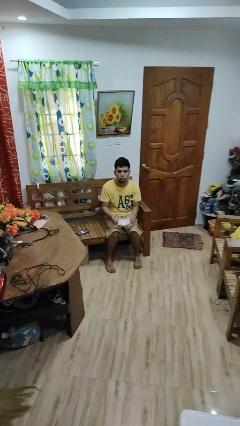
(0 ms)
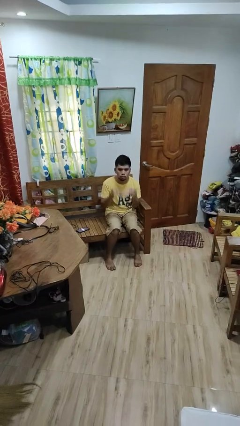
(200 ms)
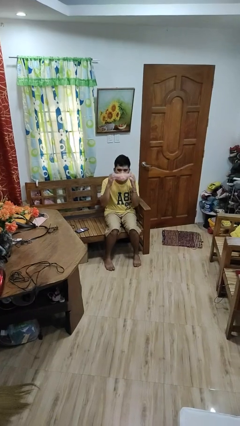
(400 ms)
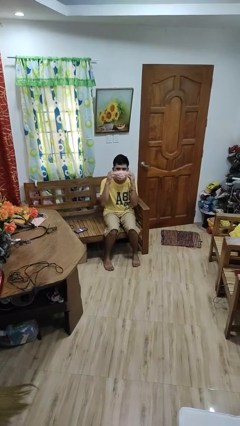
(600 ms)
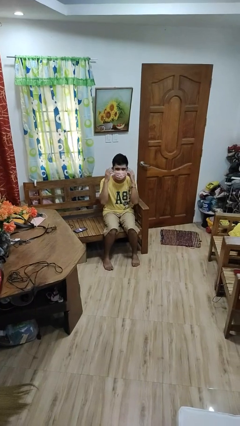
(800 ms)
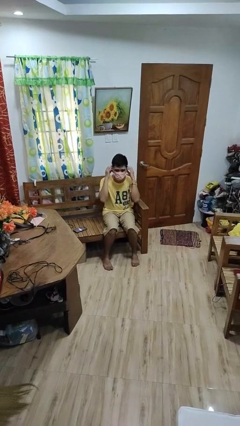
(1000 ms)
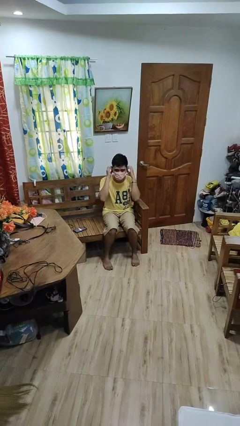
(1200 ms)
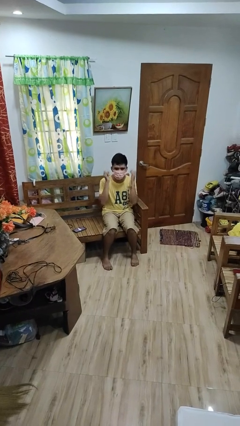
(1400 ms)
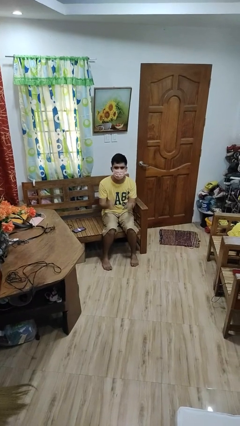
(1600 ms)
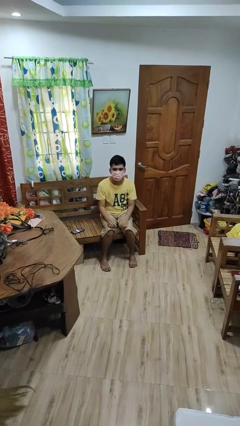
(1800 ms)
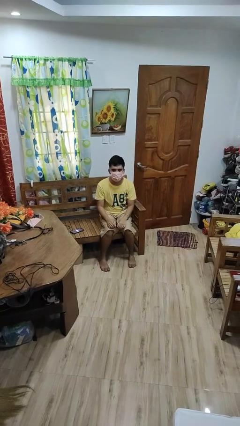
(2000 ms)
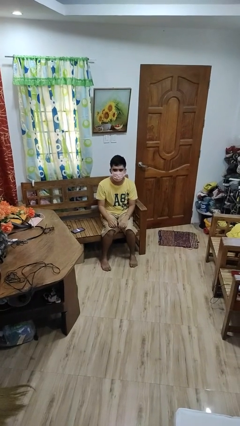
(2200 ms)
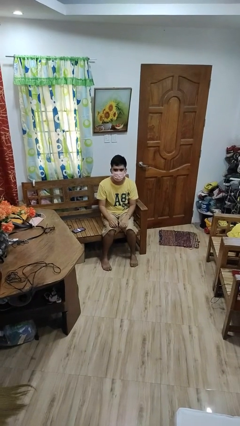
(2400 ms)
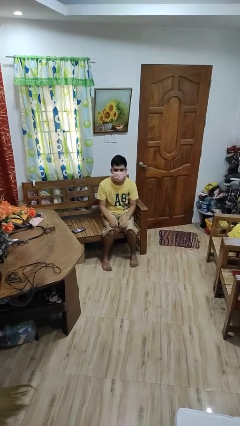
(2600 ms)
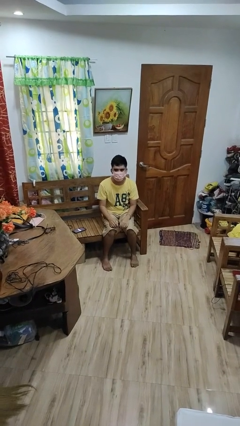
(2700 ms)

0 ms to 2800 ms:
person puts on facemask

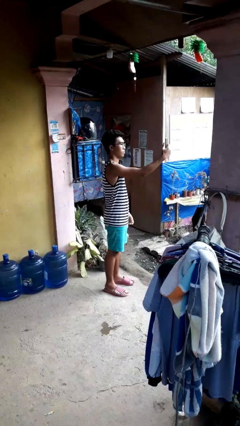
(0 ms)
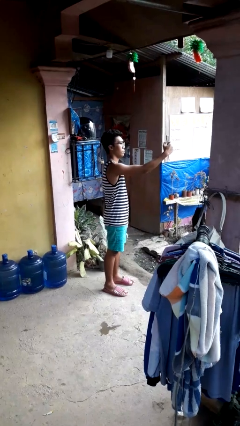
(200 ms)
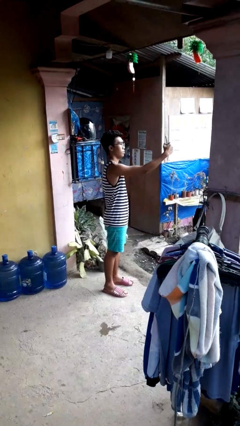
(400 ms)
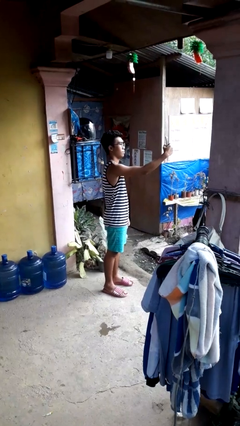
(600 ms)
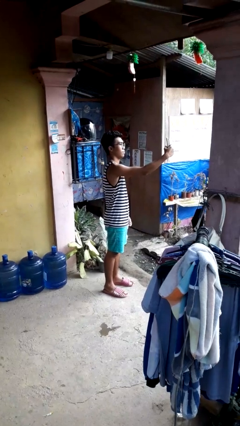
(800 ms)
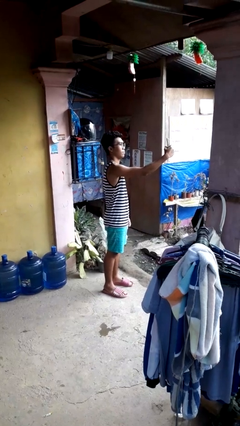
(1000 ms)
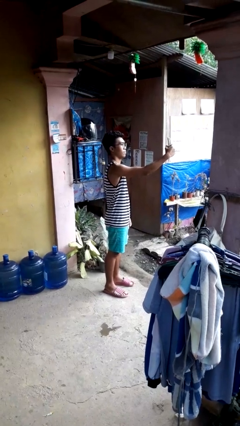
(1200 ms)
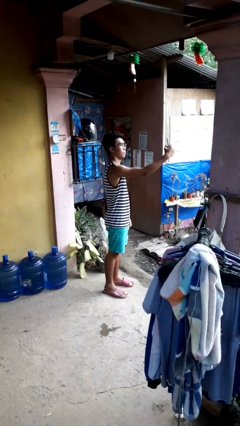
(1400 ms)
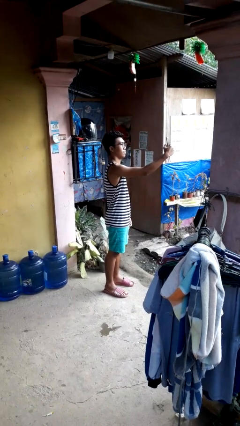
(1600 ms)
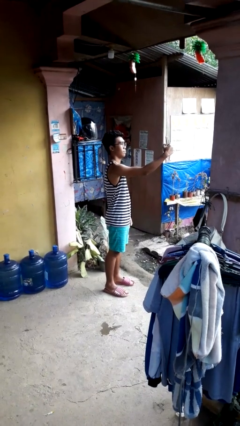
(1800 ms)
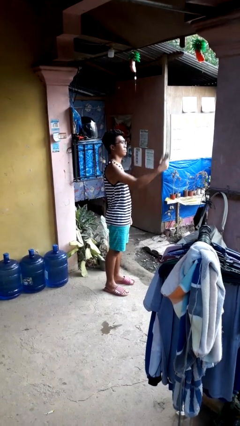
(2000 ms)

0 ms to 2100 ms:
person takes selfie

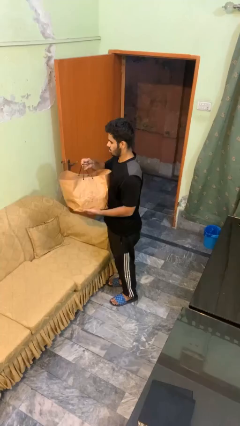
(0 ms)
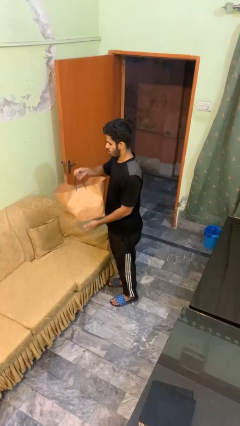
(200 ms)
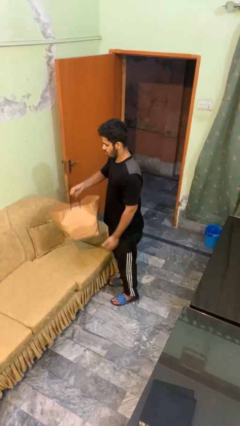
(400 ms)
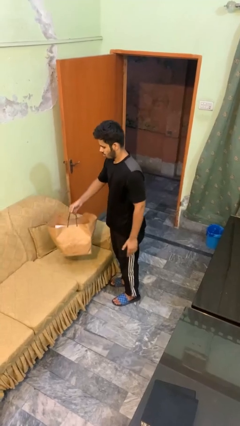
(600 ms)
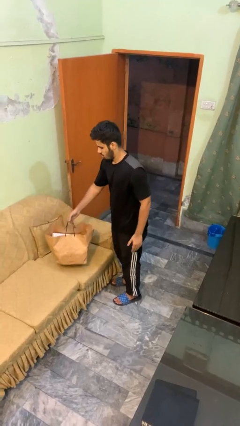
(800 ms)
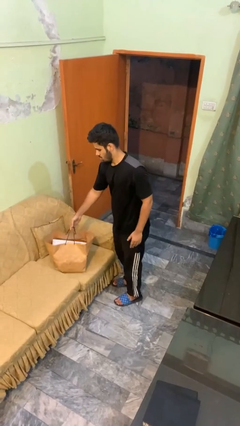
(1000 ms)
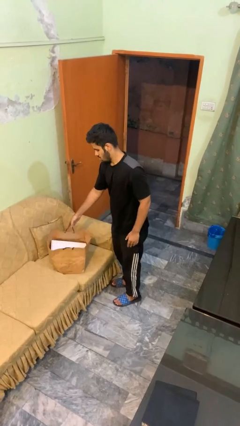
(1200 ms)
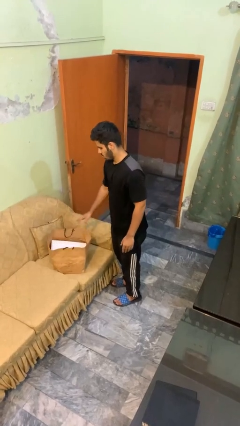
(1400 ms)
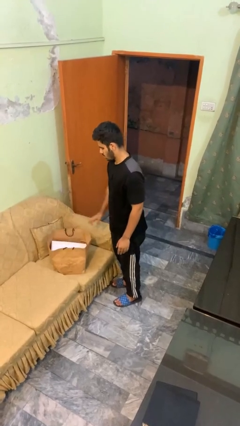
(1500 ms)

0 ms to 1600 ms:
person puts down object on couch

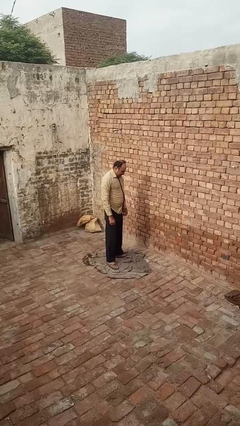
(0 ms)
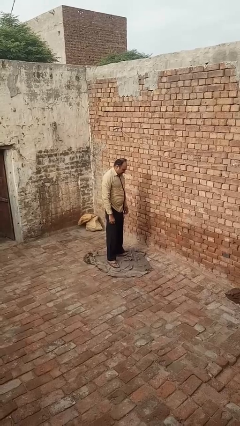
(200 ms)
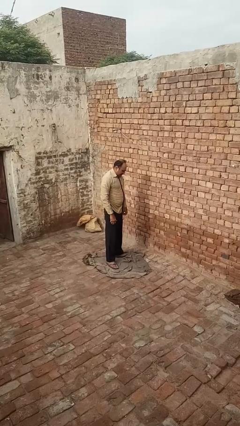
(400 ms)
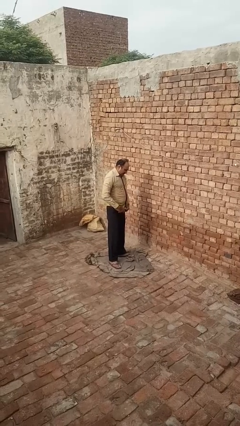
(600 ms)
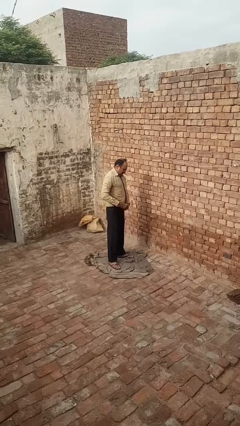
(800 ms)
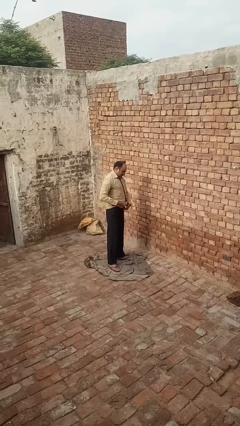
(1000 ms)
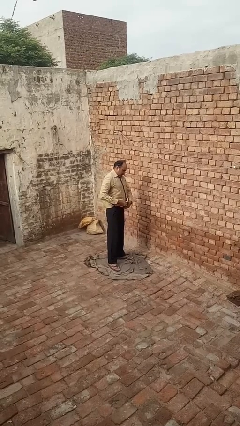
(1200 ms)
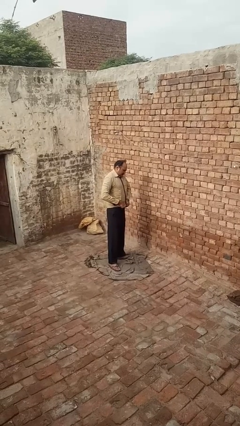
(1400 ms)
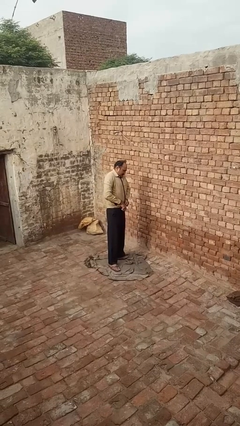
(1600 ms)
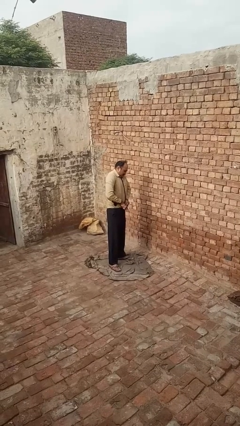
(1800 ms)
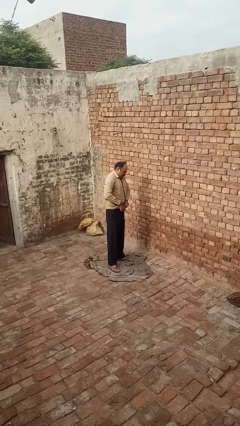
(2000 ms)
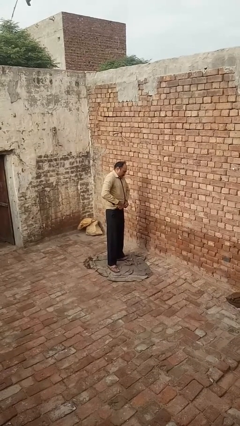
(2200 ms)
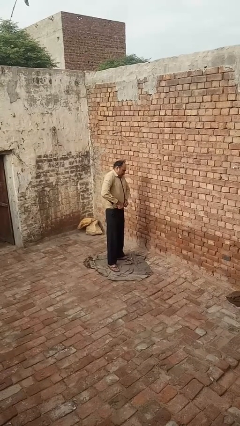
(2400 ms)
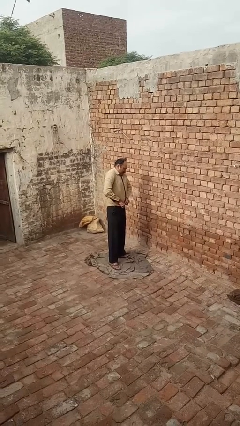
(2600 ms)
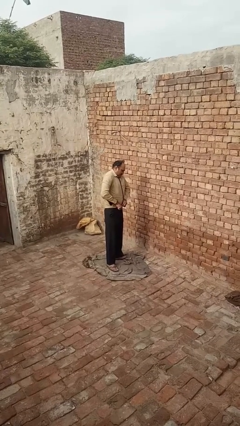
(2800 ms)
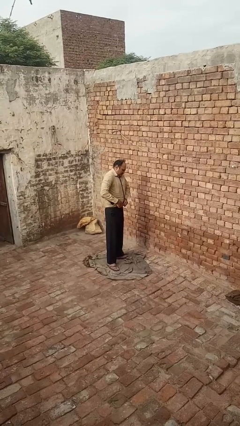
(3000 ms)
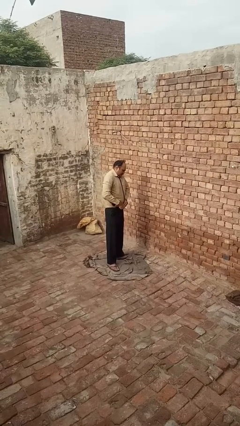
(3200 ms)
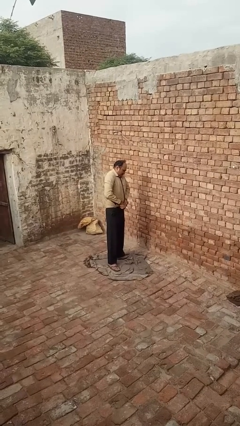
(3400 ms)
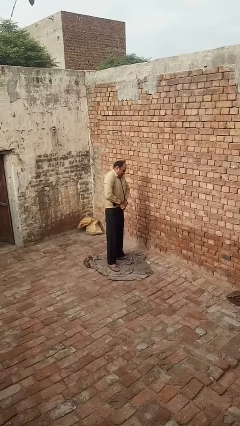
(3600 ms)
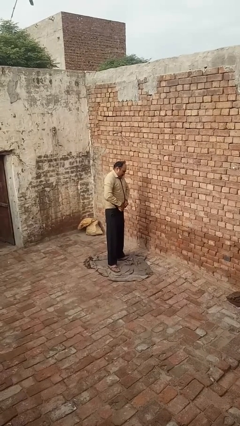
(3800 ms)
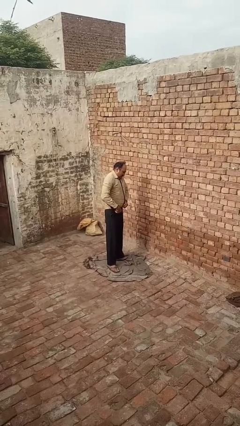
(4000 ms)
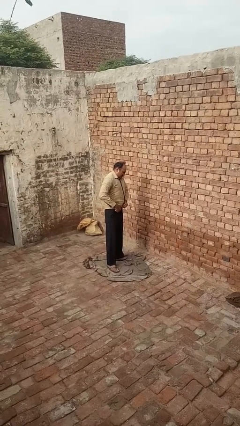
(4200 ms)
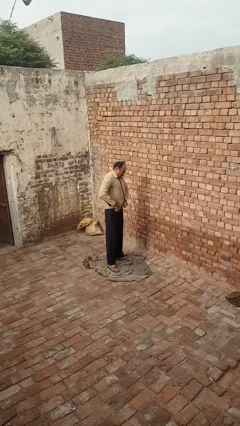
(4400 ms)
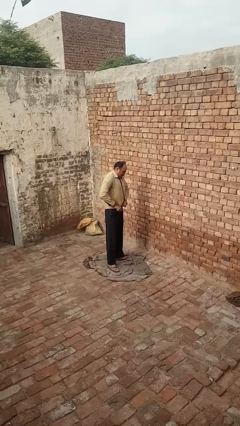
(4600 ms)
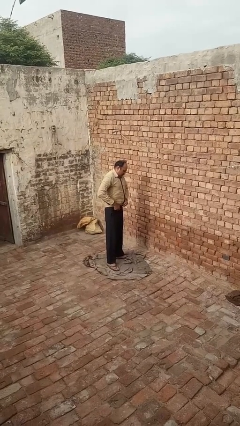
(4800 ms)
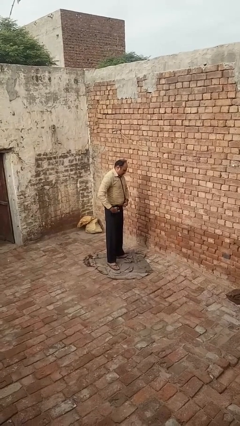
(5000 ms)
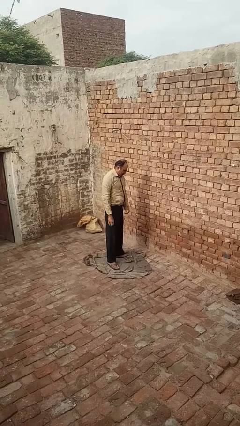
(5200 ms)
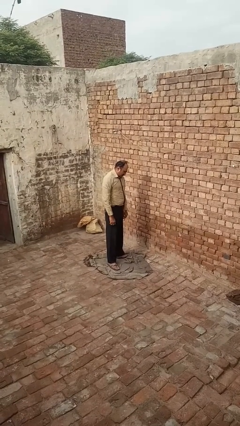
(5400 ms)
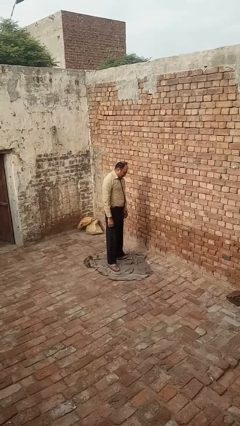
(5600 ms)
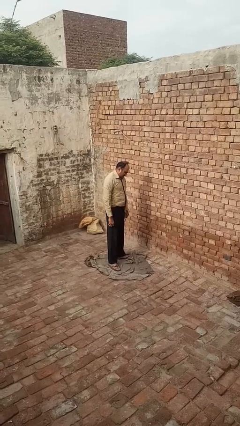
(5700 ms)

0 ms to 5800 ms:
person tucks in shirt

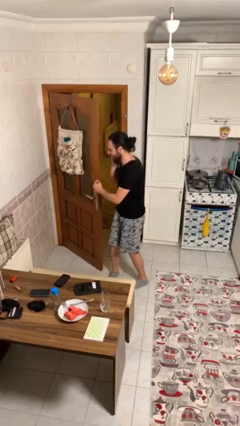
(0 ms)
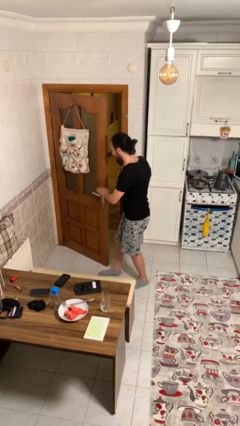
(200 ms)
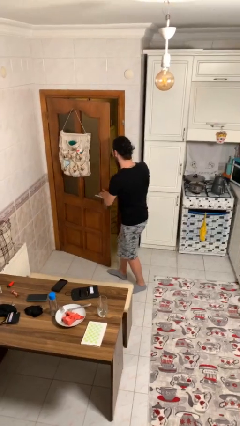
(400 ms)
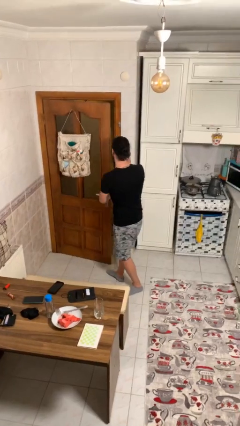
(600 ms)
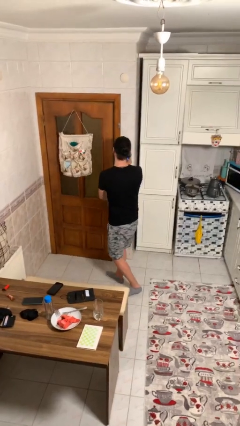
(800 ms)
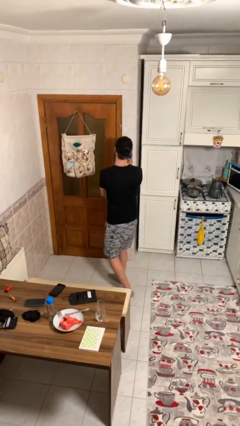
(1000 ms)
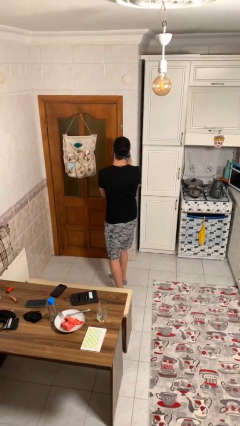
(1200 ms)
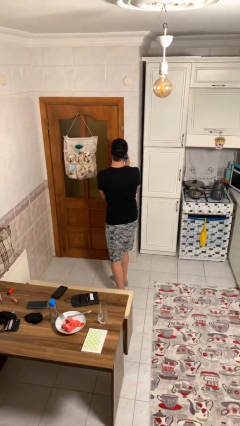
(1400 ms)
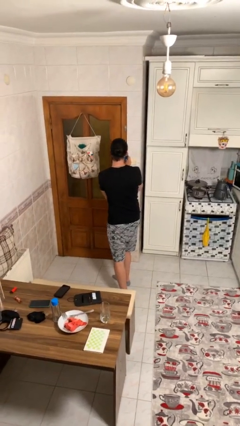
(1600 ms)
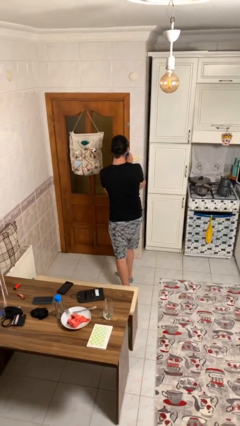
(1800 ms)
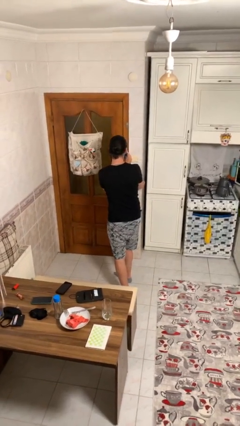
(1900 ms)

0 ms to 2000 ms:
person closes facility door

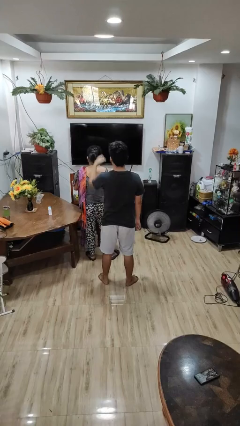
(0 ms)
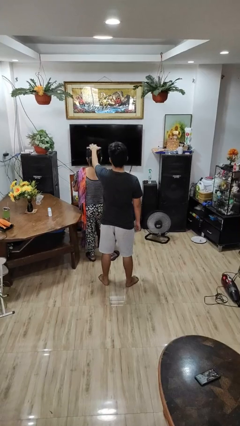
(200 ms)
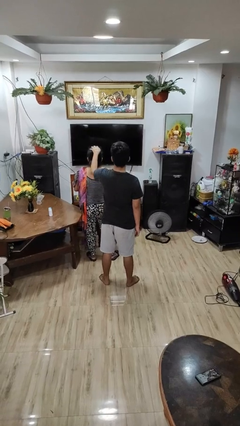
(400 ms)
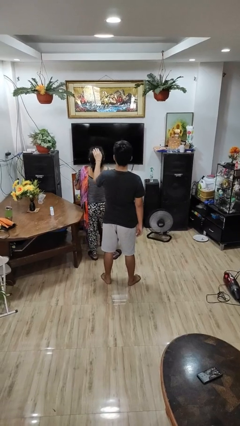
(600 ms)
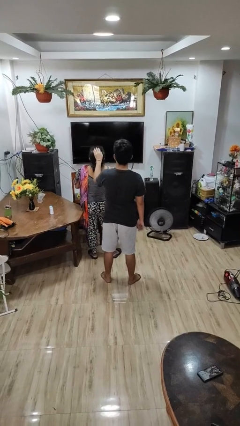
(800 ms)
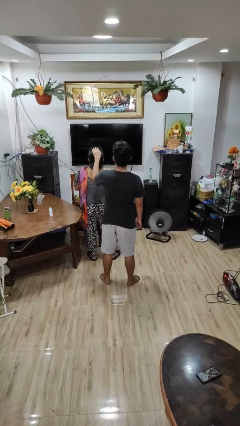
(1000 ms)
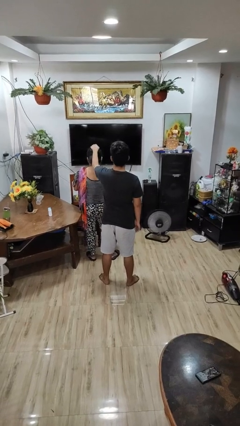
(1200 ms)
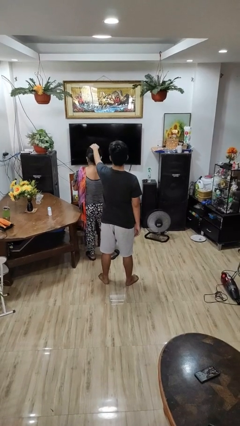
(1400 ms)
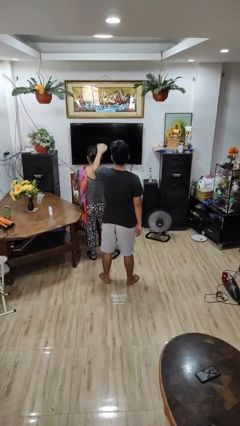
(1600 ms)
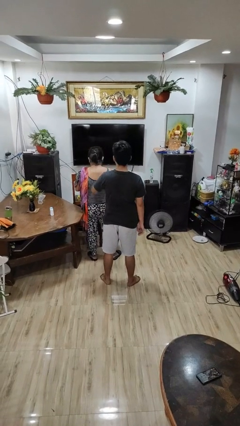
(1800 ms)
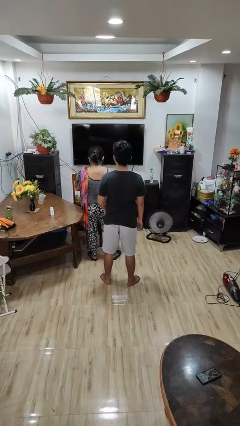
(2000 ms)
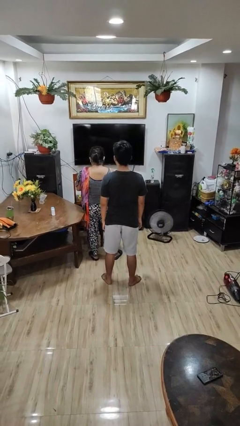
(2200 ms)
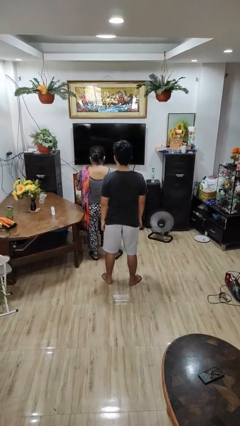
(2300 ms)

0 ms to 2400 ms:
person grabs person by hair

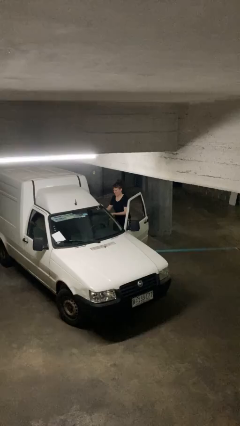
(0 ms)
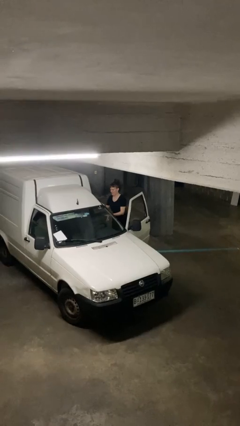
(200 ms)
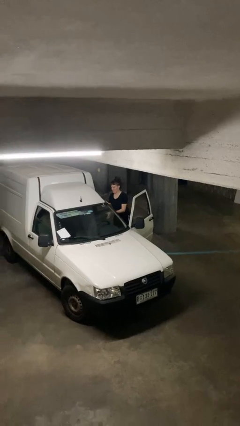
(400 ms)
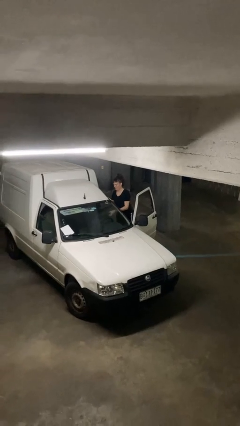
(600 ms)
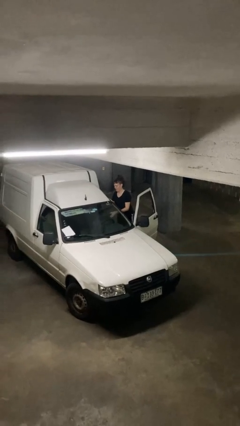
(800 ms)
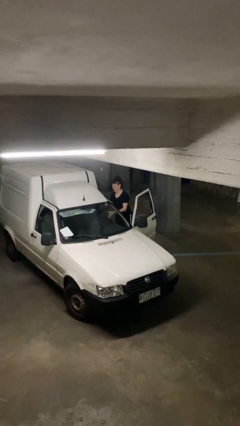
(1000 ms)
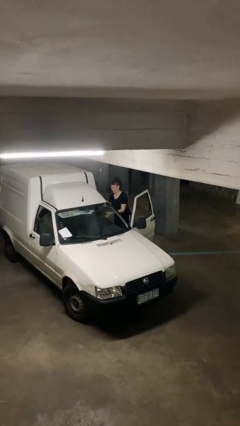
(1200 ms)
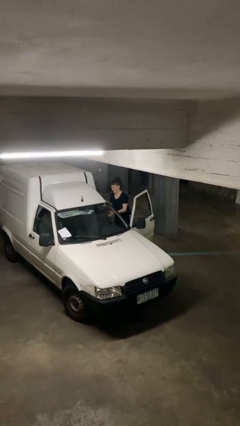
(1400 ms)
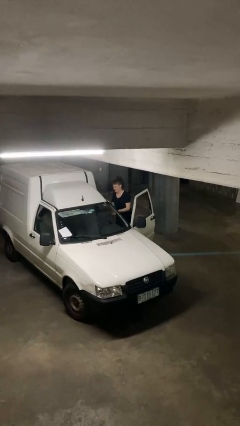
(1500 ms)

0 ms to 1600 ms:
person loads car
